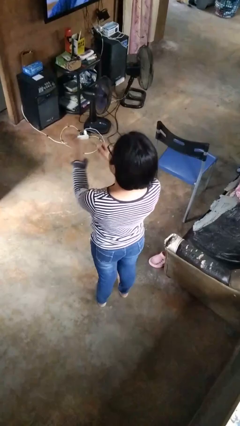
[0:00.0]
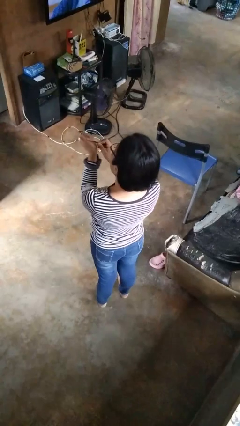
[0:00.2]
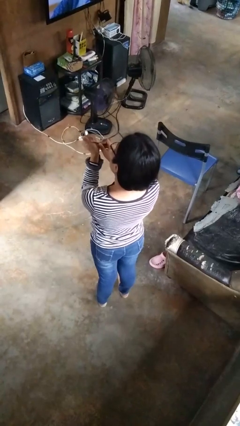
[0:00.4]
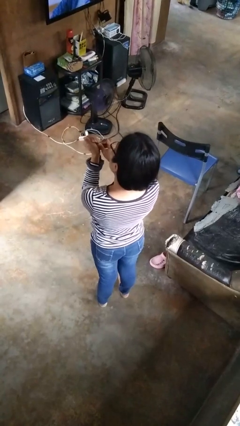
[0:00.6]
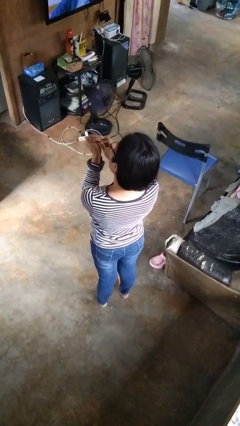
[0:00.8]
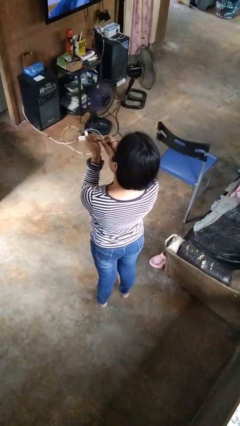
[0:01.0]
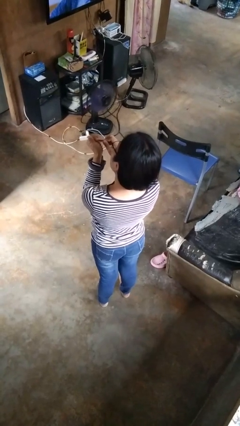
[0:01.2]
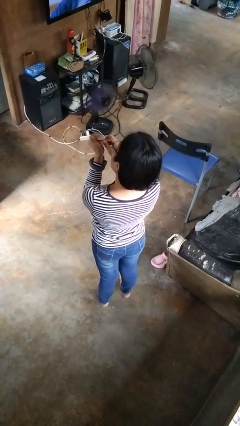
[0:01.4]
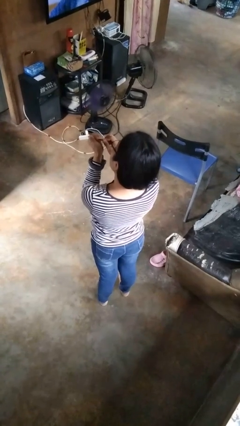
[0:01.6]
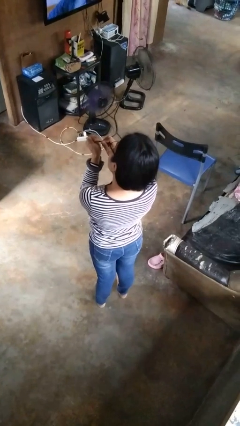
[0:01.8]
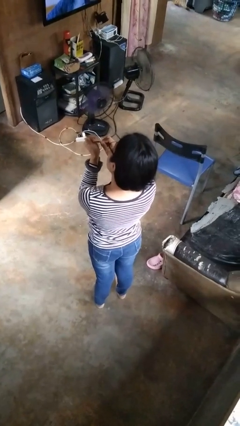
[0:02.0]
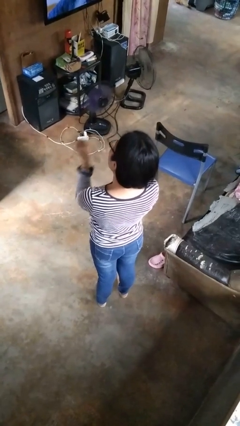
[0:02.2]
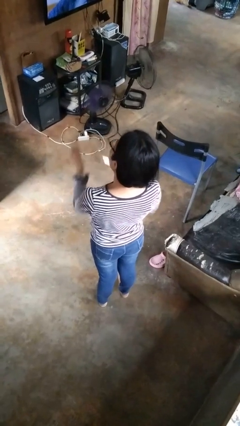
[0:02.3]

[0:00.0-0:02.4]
person files fingernails

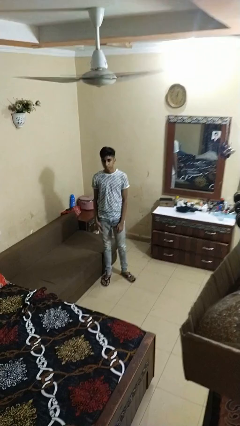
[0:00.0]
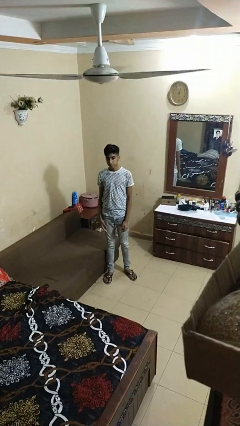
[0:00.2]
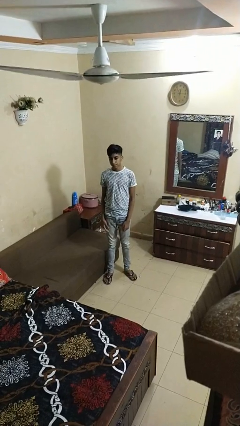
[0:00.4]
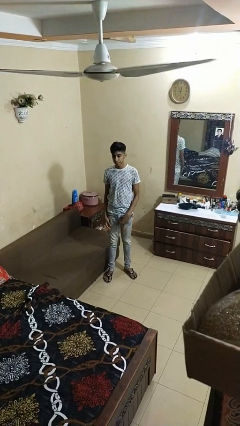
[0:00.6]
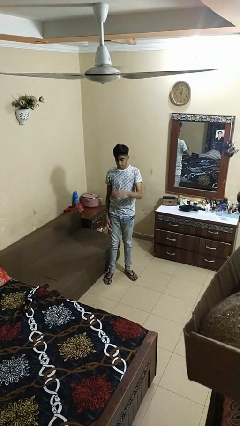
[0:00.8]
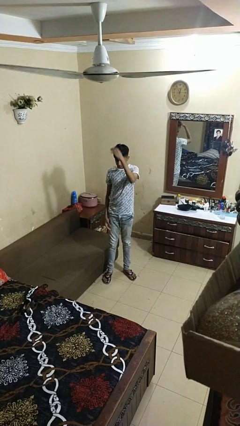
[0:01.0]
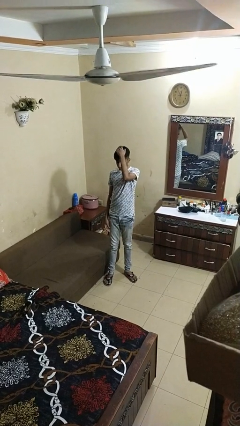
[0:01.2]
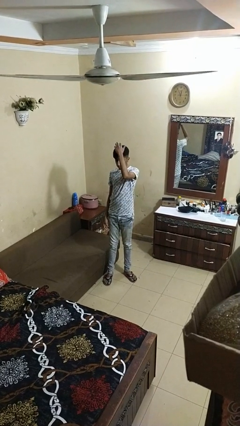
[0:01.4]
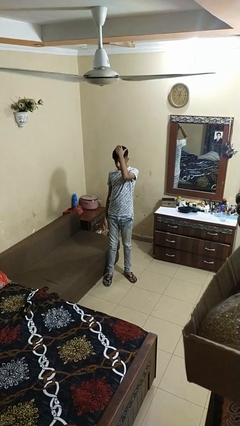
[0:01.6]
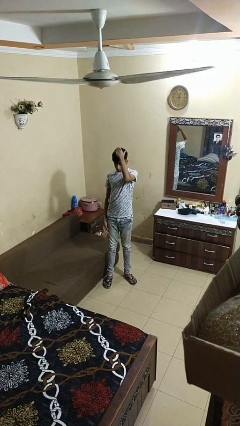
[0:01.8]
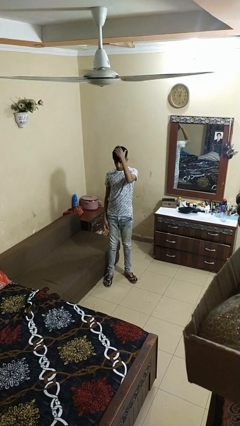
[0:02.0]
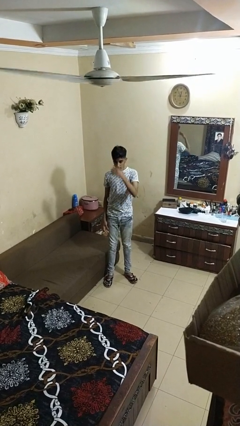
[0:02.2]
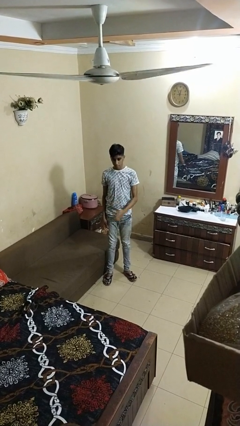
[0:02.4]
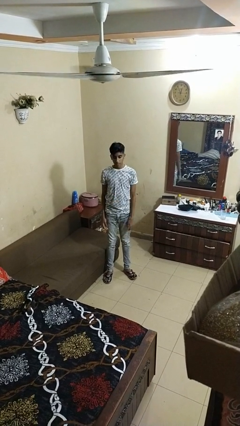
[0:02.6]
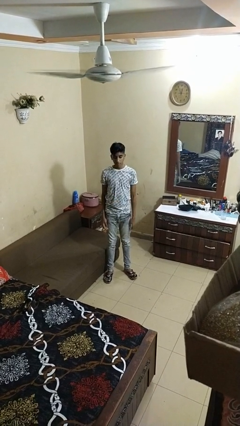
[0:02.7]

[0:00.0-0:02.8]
person pats head

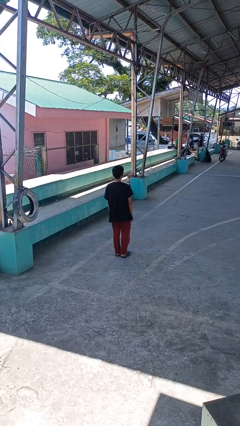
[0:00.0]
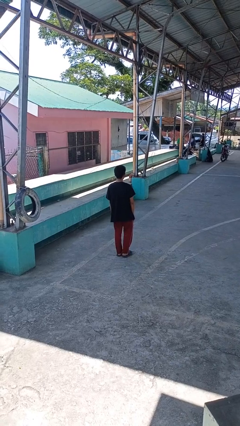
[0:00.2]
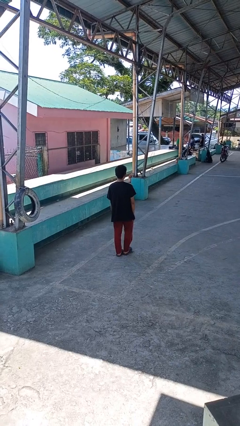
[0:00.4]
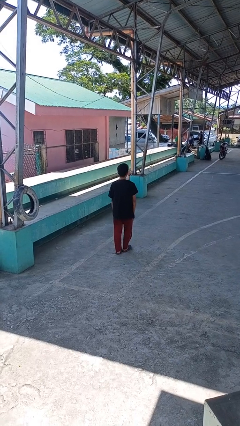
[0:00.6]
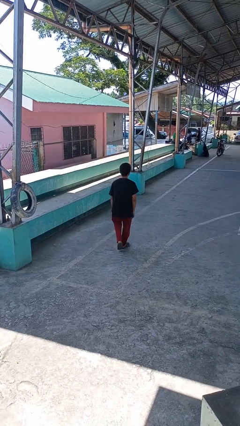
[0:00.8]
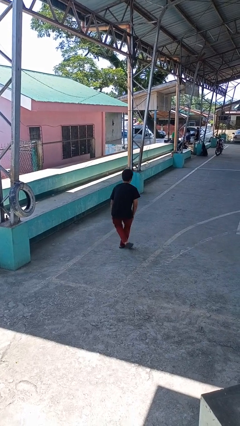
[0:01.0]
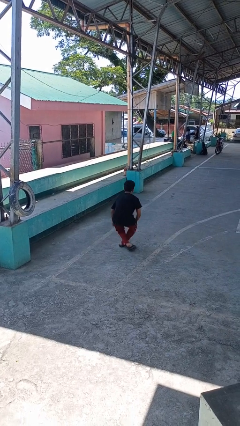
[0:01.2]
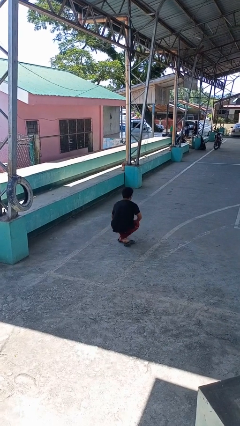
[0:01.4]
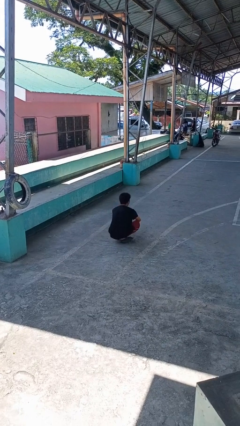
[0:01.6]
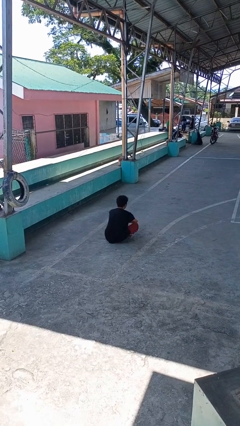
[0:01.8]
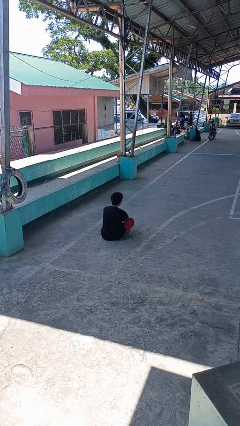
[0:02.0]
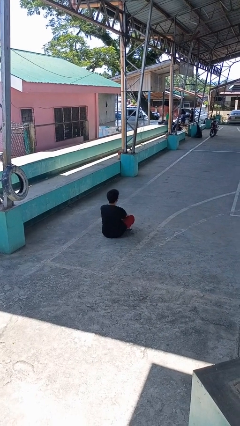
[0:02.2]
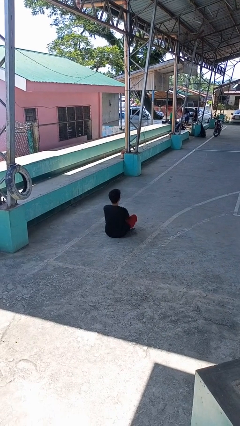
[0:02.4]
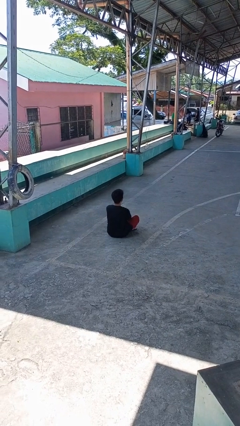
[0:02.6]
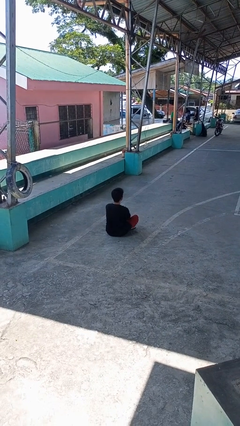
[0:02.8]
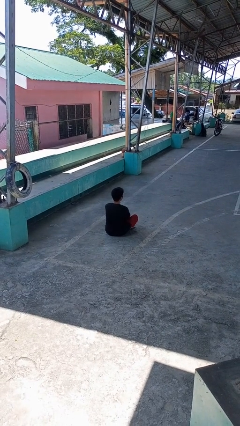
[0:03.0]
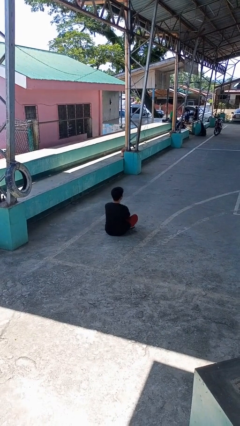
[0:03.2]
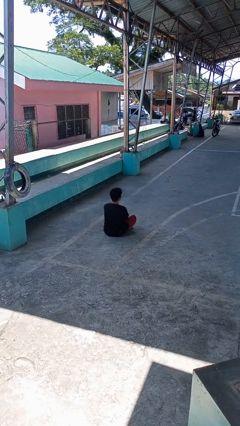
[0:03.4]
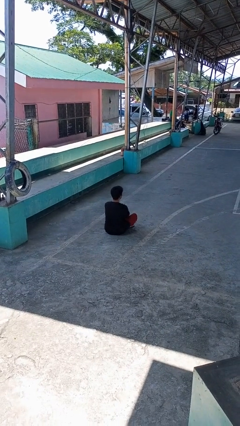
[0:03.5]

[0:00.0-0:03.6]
person sits crisscross

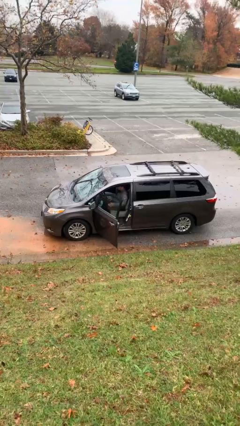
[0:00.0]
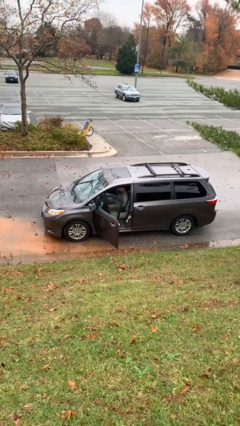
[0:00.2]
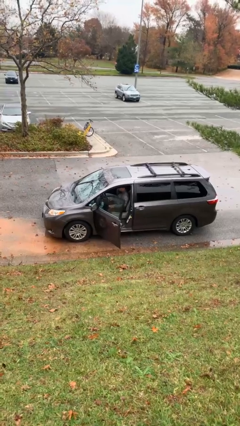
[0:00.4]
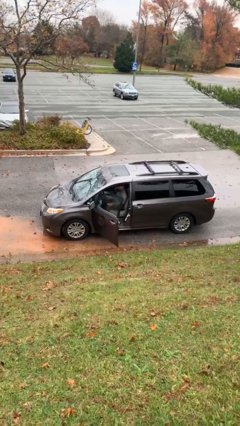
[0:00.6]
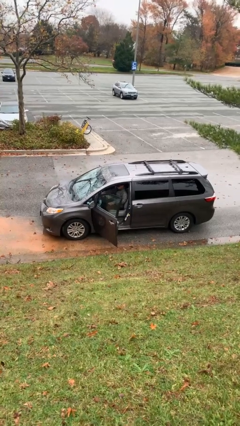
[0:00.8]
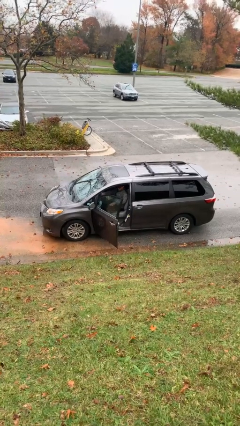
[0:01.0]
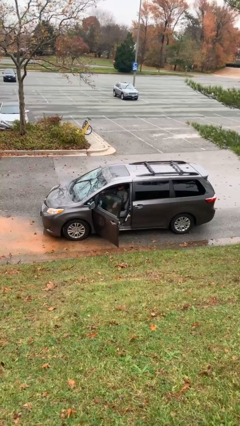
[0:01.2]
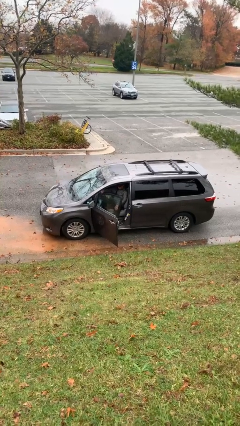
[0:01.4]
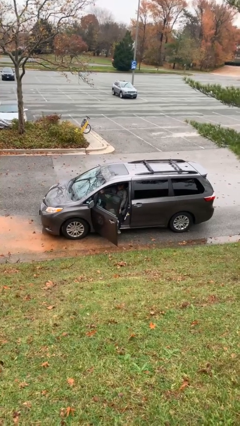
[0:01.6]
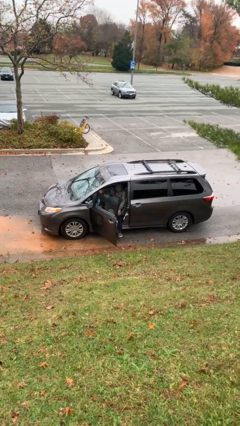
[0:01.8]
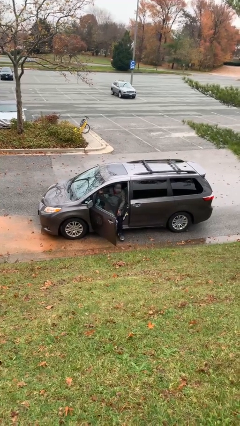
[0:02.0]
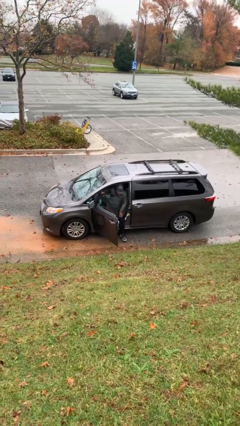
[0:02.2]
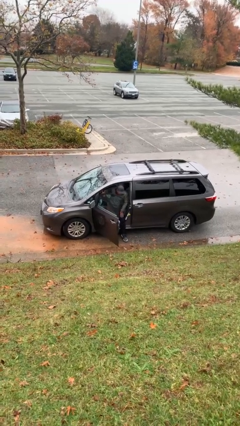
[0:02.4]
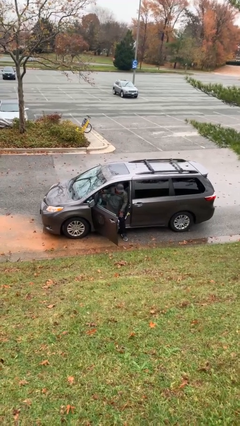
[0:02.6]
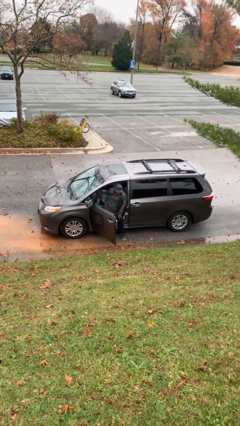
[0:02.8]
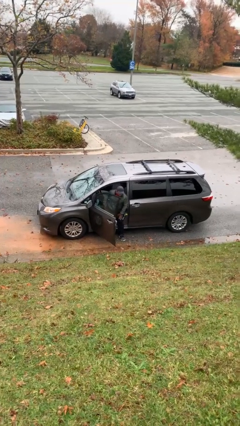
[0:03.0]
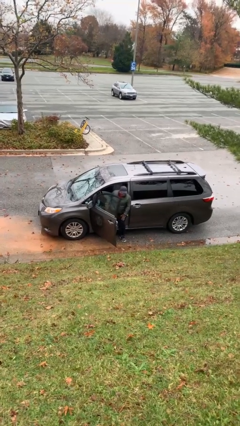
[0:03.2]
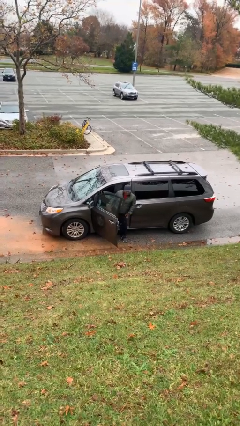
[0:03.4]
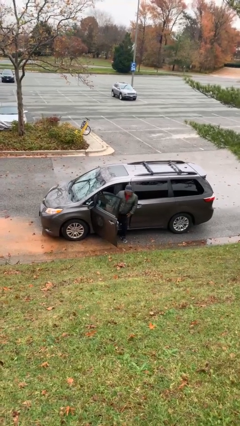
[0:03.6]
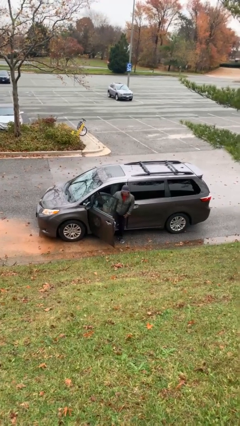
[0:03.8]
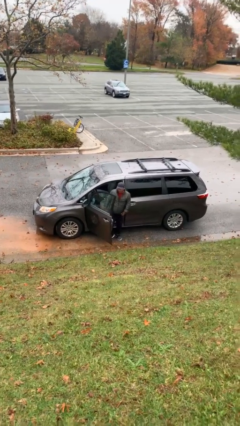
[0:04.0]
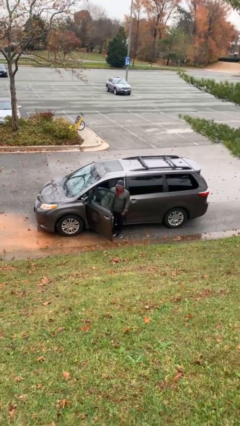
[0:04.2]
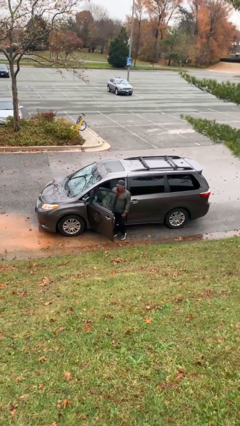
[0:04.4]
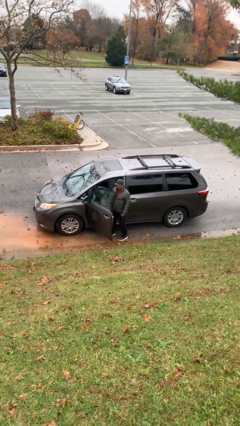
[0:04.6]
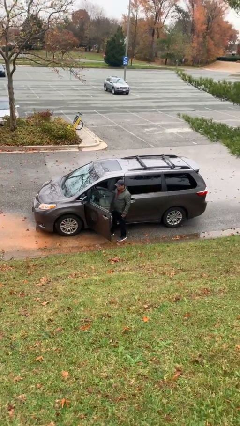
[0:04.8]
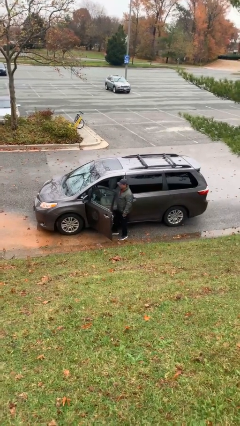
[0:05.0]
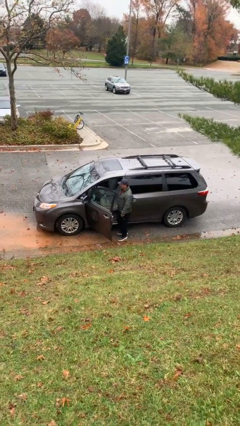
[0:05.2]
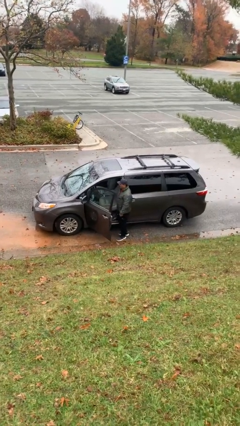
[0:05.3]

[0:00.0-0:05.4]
person exits car

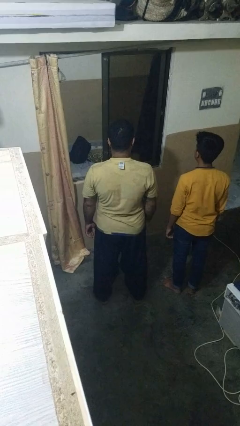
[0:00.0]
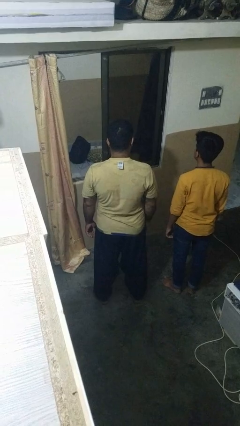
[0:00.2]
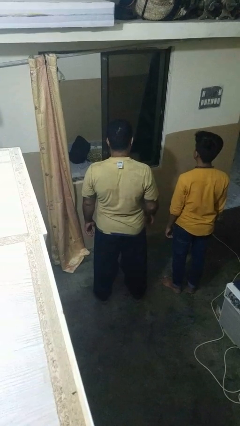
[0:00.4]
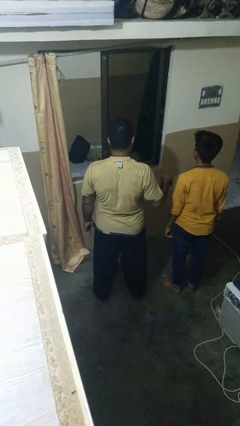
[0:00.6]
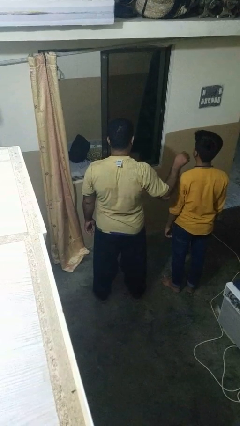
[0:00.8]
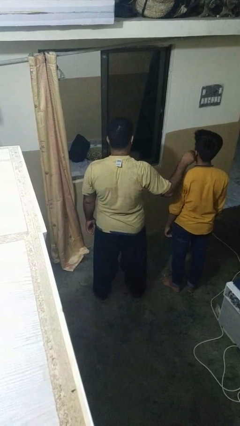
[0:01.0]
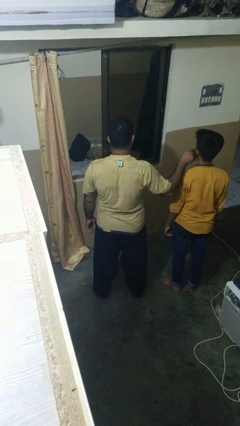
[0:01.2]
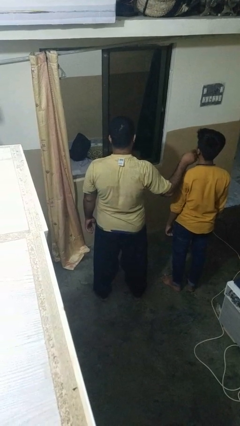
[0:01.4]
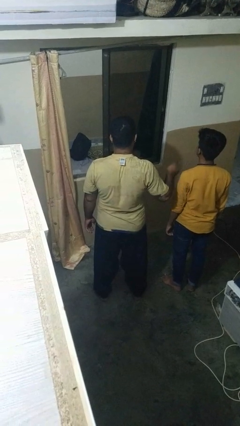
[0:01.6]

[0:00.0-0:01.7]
person touches face of person

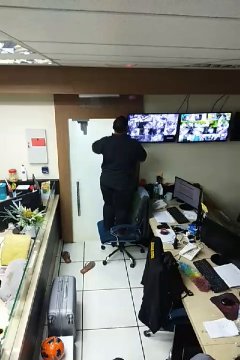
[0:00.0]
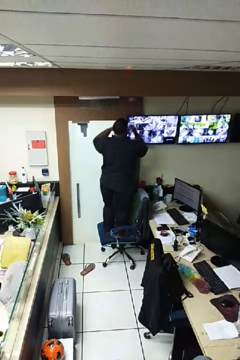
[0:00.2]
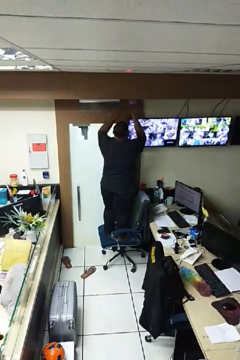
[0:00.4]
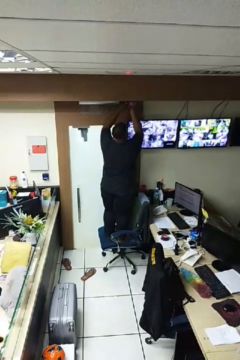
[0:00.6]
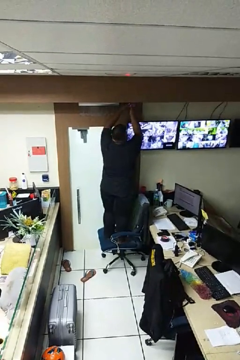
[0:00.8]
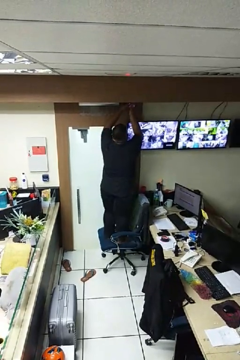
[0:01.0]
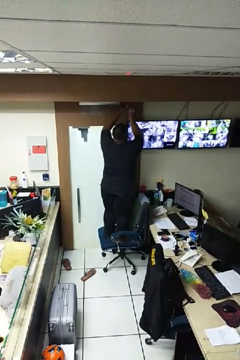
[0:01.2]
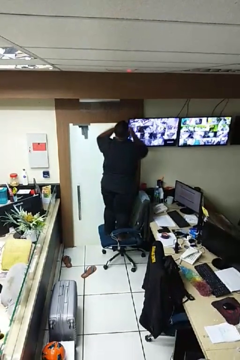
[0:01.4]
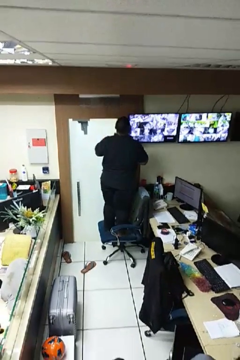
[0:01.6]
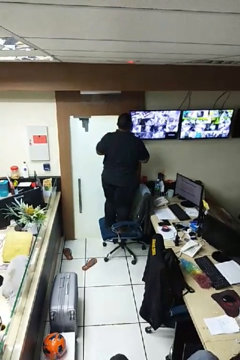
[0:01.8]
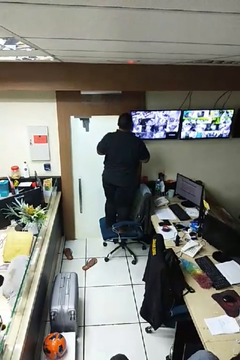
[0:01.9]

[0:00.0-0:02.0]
person takes down smoke detector
